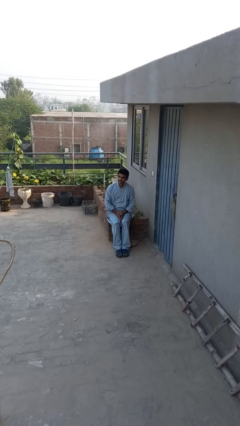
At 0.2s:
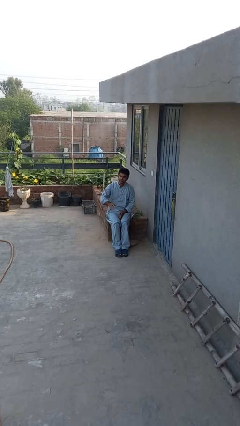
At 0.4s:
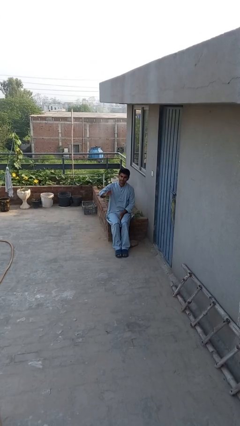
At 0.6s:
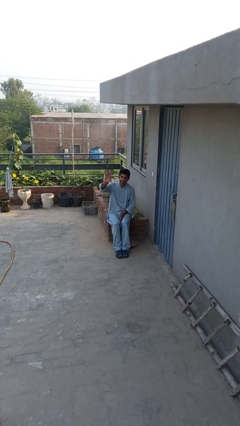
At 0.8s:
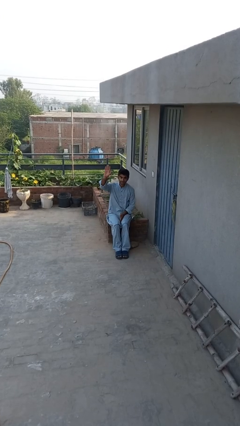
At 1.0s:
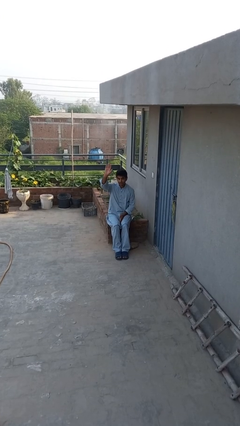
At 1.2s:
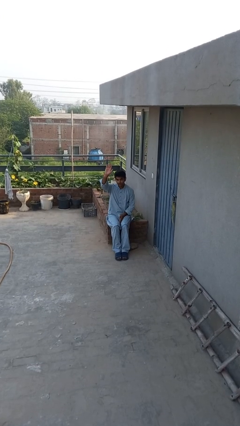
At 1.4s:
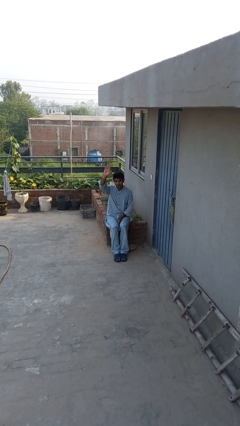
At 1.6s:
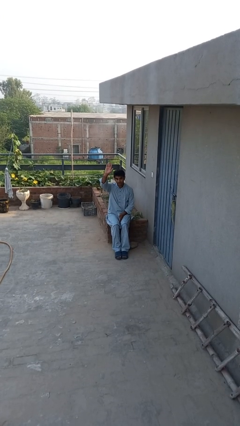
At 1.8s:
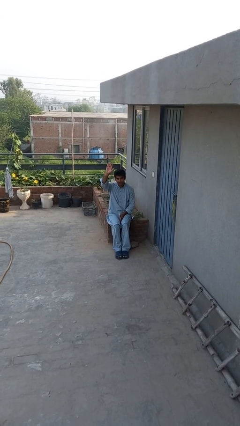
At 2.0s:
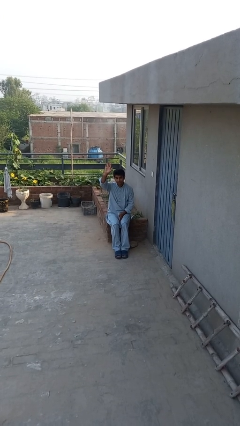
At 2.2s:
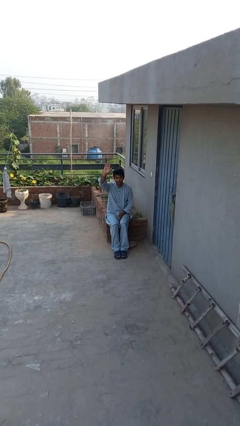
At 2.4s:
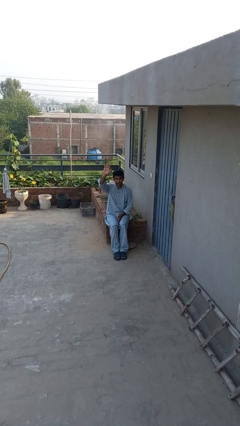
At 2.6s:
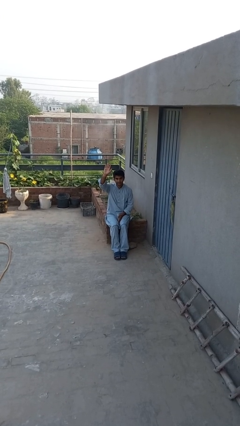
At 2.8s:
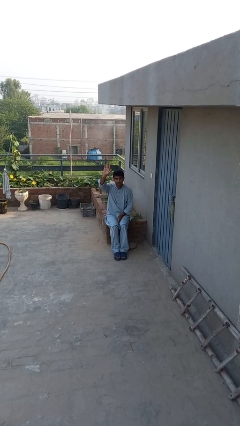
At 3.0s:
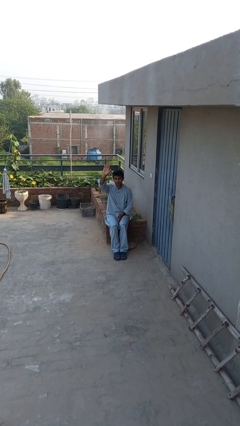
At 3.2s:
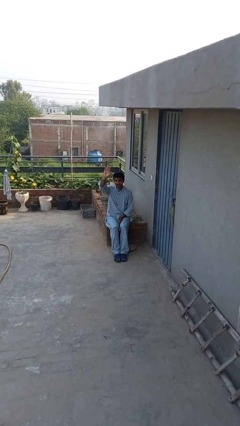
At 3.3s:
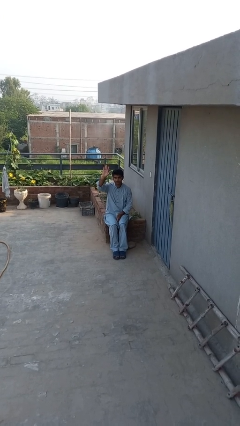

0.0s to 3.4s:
person gestures raise hand

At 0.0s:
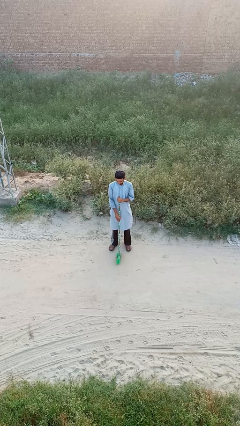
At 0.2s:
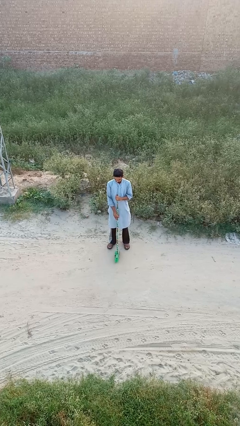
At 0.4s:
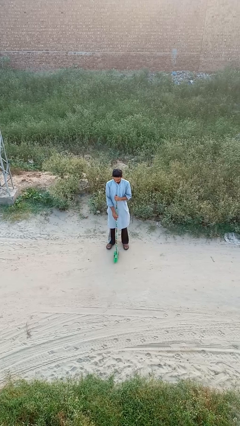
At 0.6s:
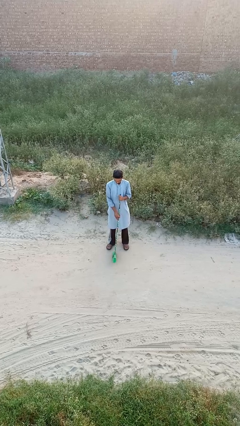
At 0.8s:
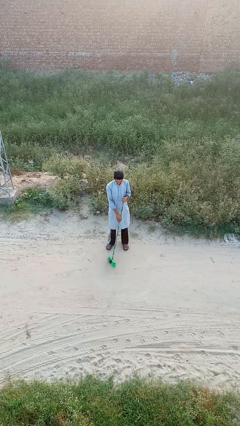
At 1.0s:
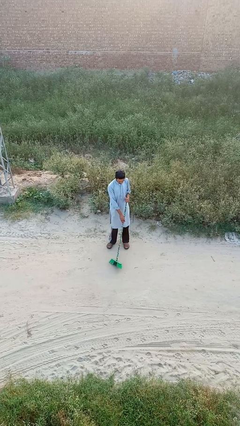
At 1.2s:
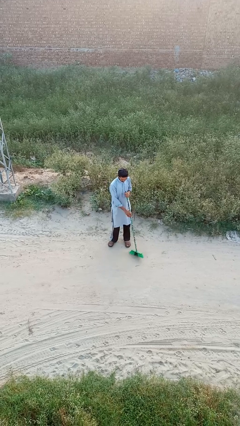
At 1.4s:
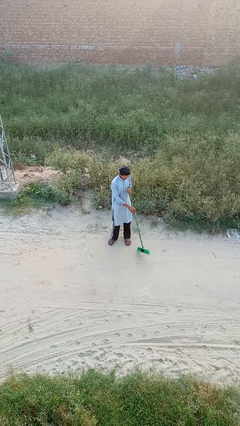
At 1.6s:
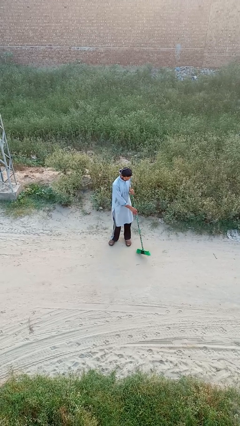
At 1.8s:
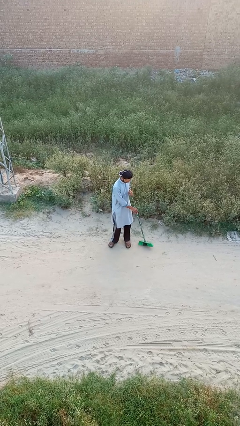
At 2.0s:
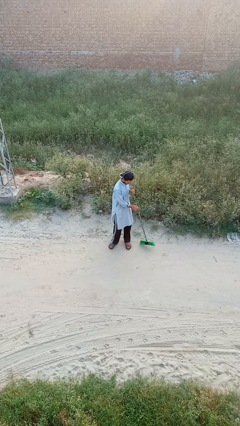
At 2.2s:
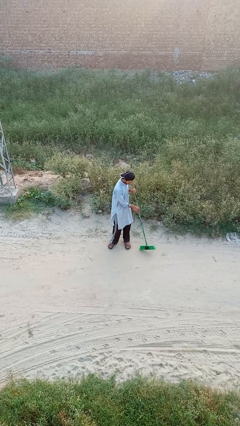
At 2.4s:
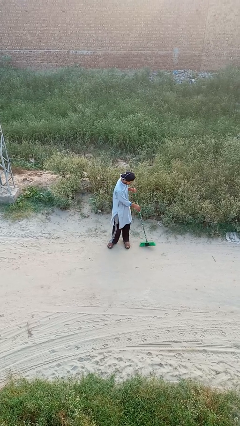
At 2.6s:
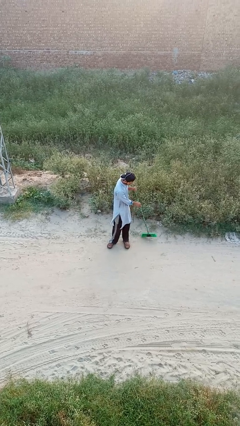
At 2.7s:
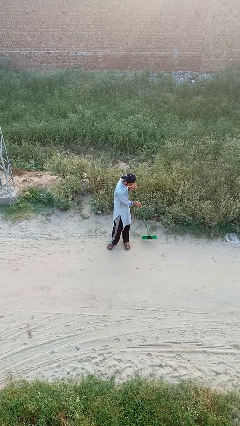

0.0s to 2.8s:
person sweeps floor

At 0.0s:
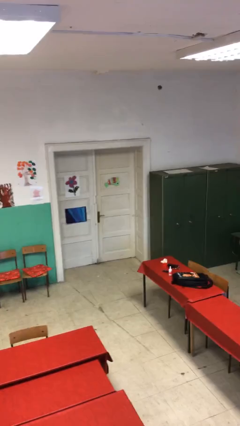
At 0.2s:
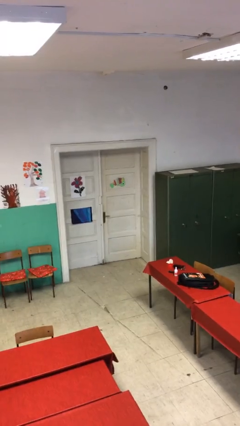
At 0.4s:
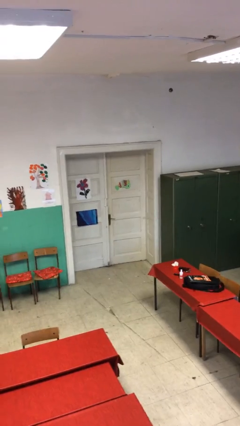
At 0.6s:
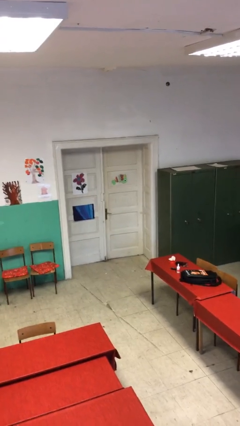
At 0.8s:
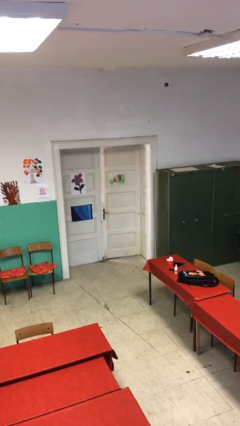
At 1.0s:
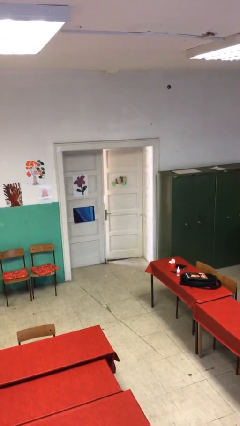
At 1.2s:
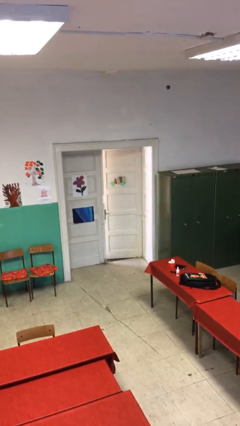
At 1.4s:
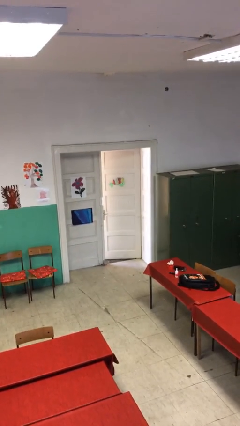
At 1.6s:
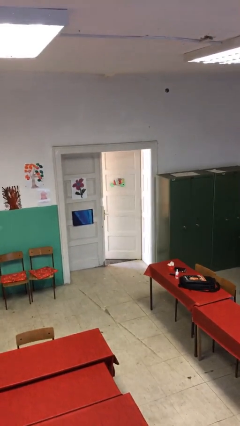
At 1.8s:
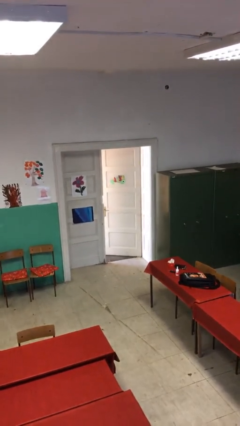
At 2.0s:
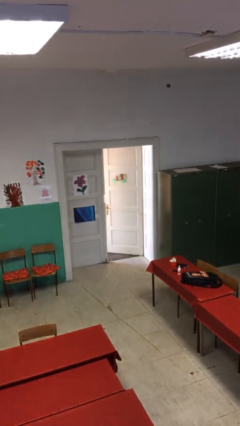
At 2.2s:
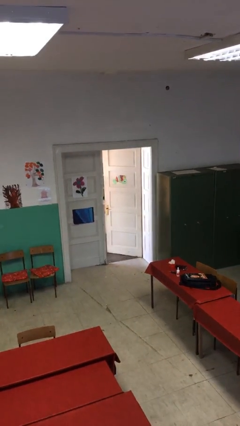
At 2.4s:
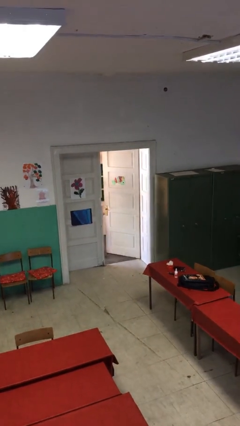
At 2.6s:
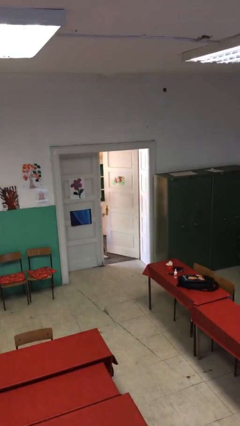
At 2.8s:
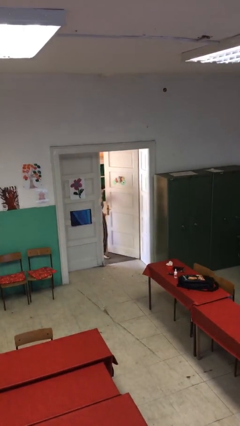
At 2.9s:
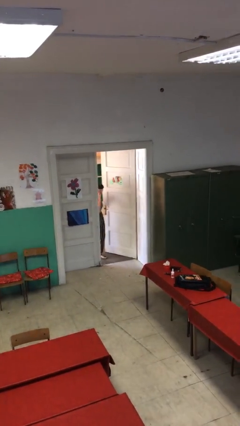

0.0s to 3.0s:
person opens facility door

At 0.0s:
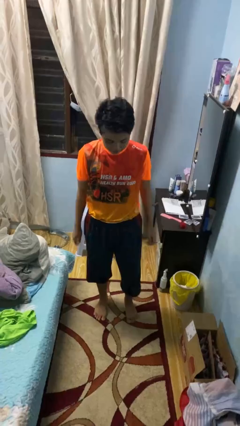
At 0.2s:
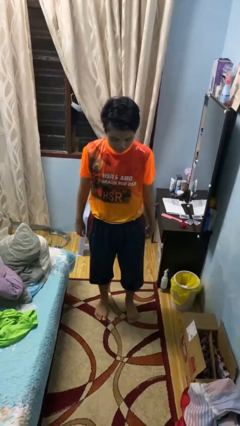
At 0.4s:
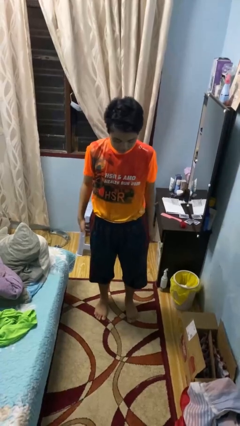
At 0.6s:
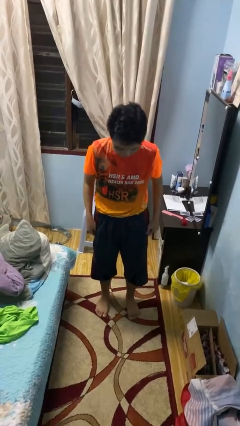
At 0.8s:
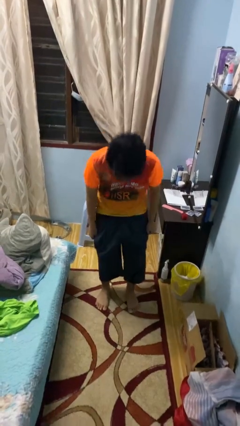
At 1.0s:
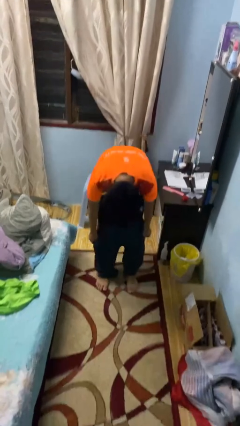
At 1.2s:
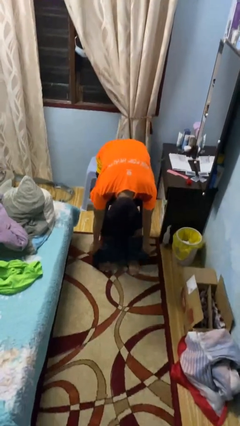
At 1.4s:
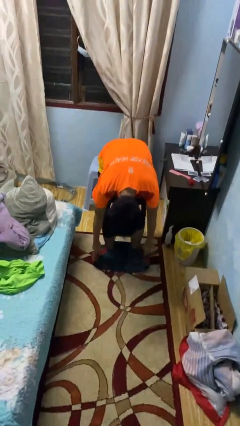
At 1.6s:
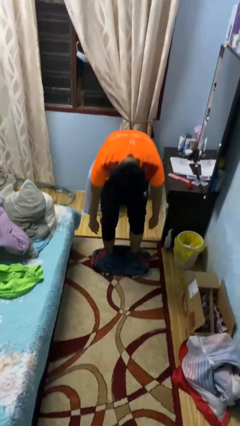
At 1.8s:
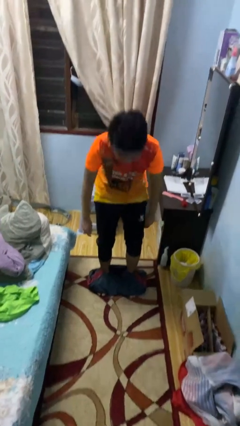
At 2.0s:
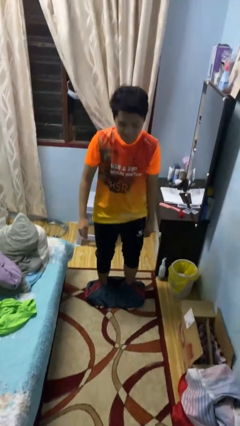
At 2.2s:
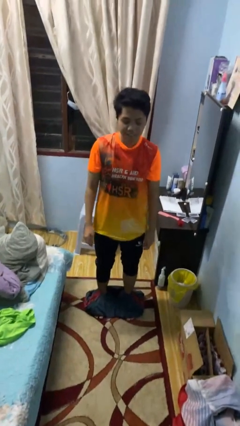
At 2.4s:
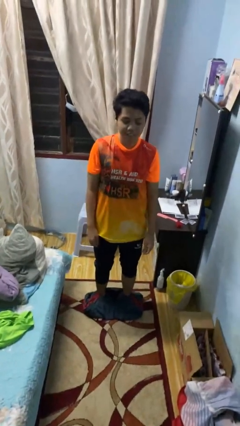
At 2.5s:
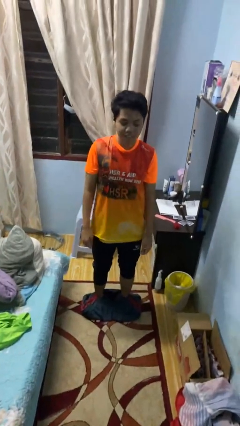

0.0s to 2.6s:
person takes off pants

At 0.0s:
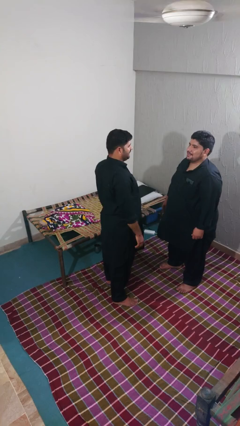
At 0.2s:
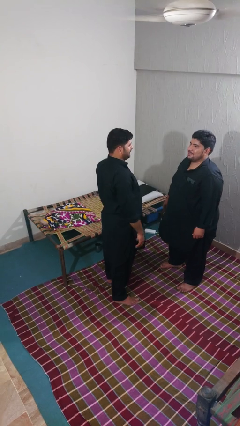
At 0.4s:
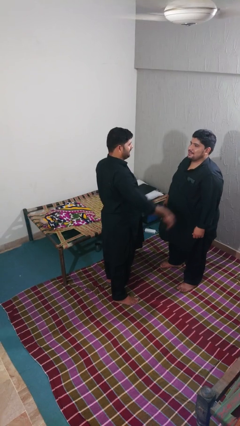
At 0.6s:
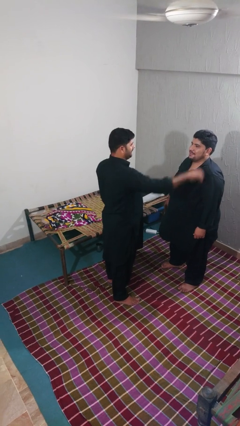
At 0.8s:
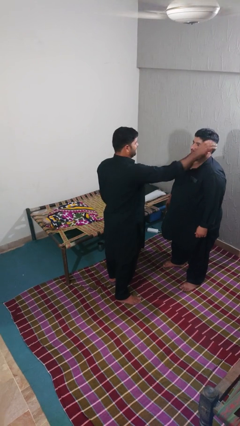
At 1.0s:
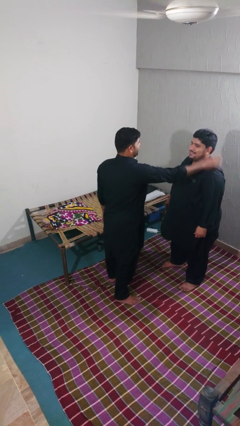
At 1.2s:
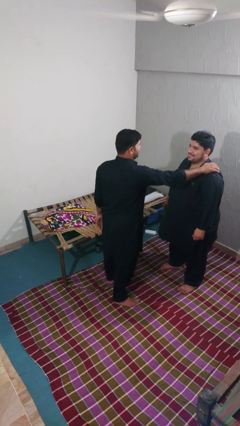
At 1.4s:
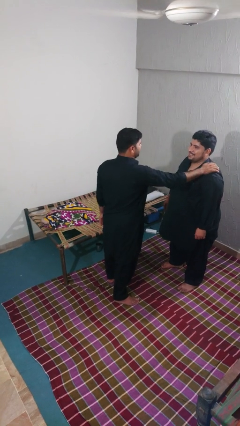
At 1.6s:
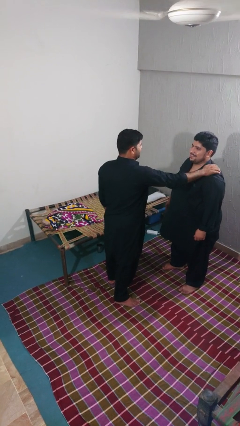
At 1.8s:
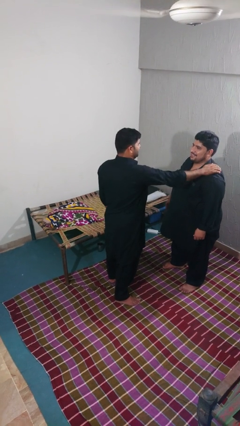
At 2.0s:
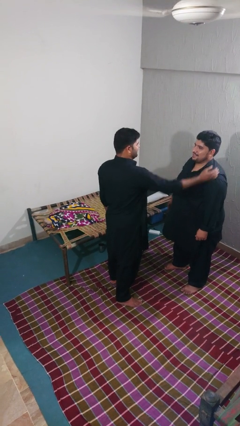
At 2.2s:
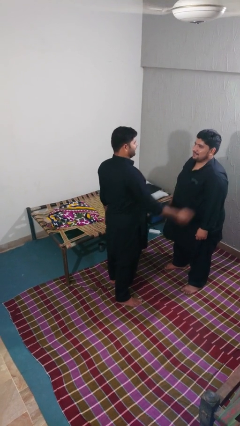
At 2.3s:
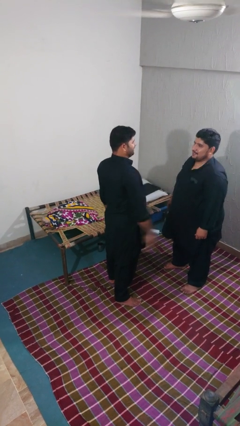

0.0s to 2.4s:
person pounds shoulders of person

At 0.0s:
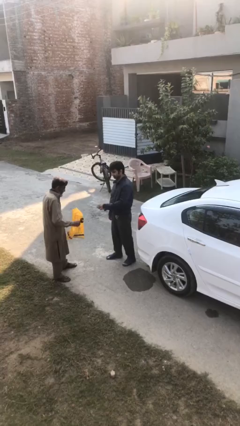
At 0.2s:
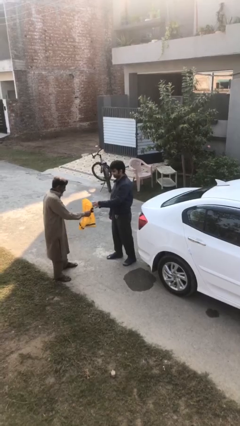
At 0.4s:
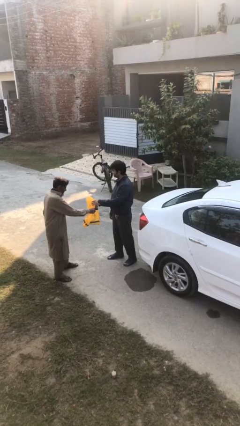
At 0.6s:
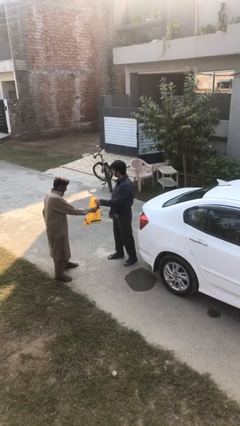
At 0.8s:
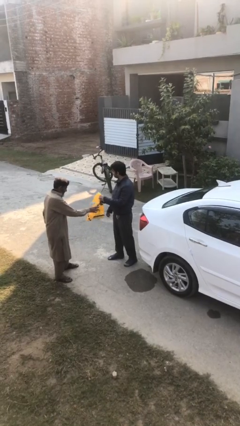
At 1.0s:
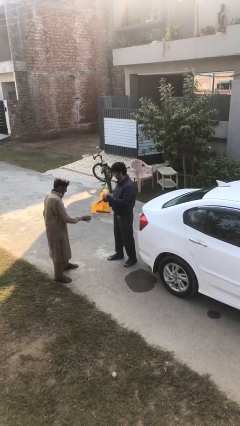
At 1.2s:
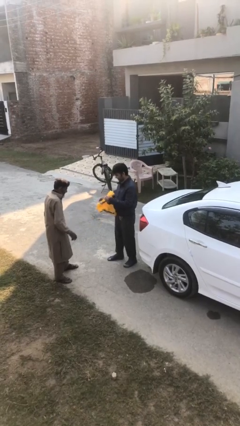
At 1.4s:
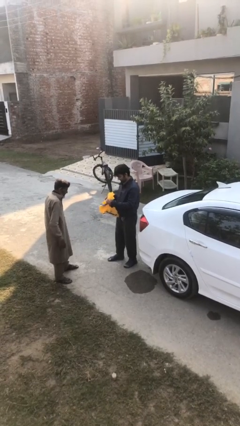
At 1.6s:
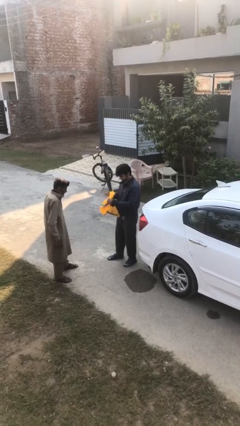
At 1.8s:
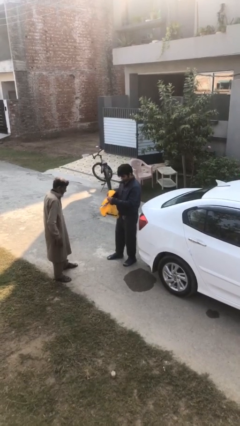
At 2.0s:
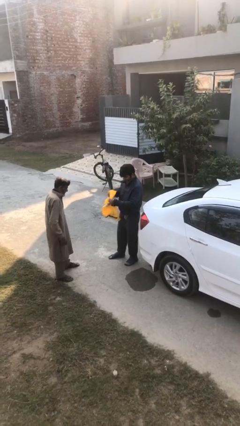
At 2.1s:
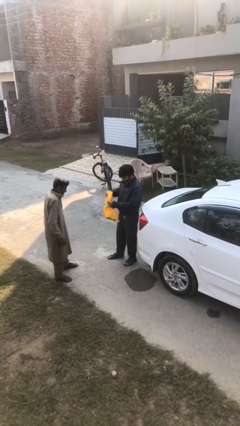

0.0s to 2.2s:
person transfers object to person

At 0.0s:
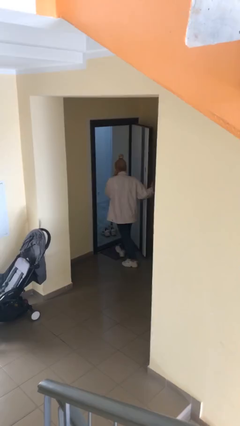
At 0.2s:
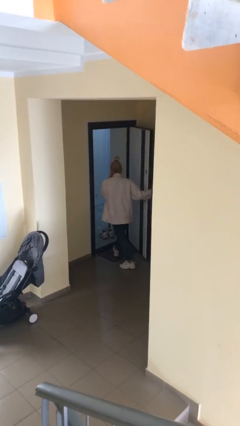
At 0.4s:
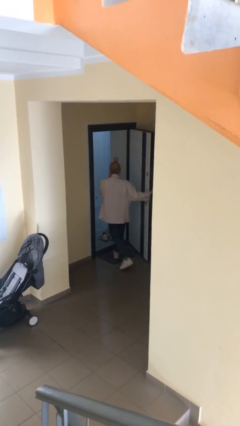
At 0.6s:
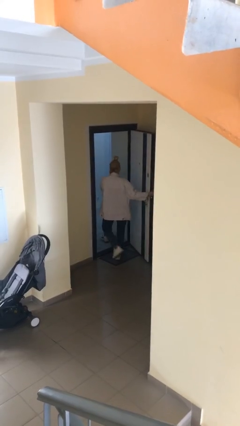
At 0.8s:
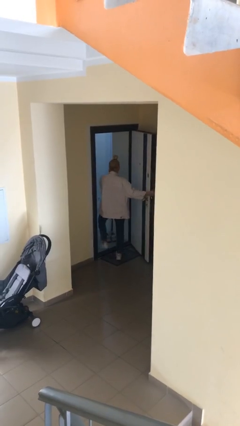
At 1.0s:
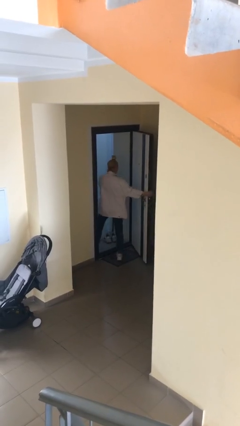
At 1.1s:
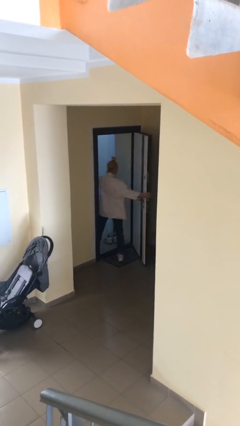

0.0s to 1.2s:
person exits scene through structure
